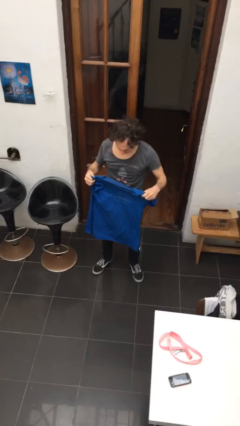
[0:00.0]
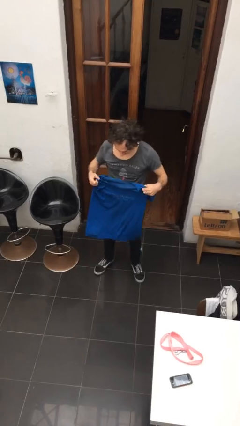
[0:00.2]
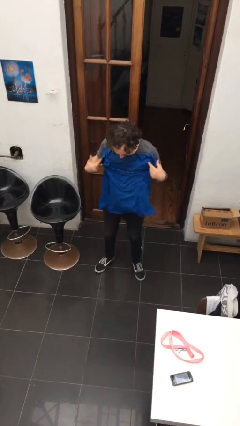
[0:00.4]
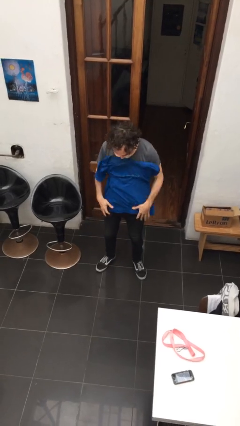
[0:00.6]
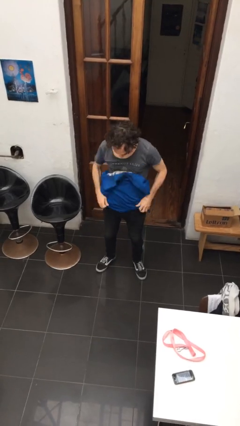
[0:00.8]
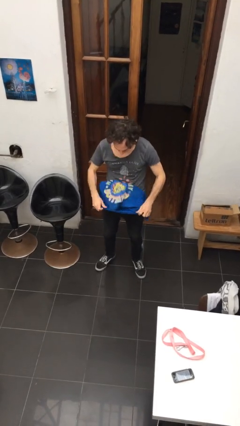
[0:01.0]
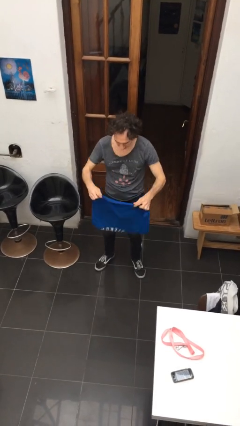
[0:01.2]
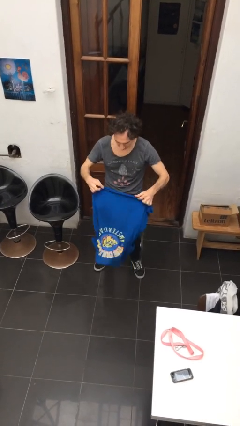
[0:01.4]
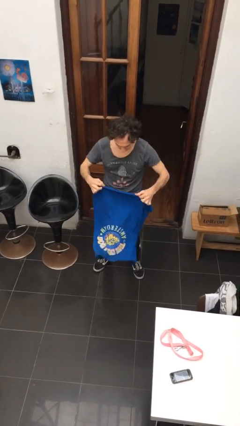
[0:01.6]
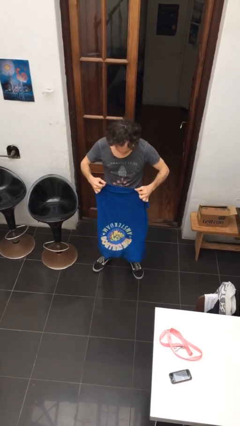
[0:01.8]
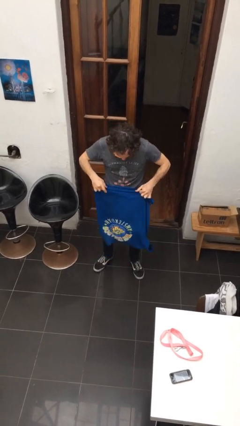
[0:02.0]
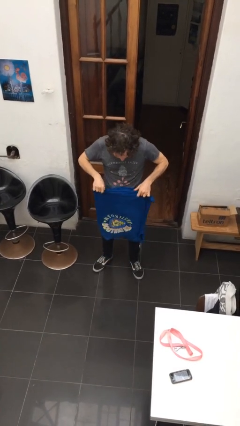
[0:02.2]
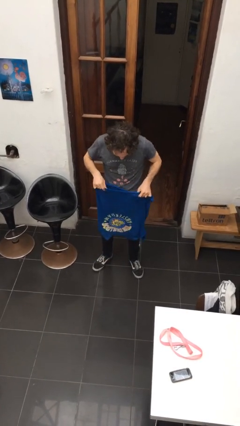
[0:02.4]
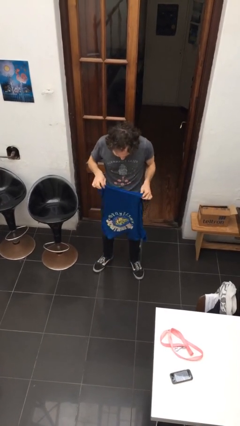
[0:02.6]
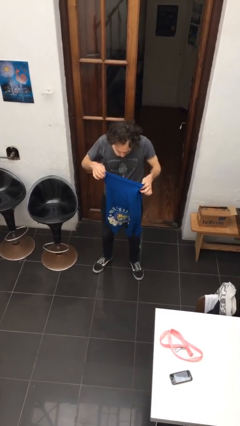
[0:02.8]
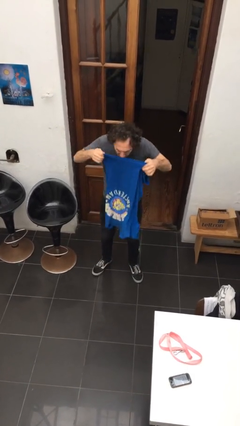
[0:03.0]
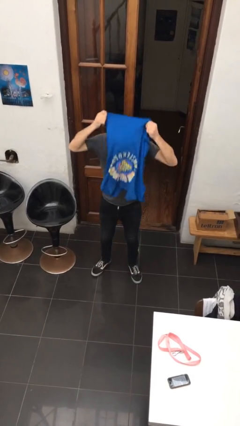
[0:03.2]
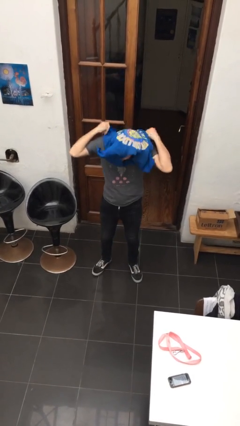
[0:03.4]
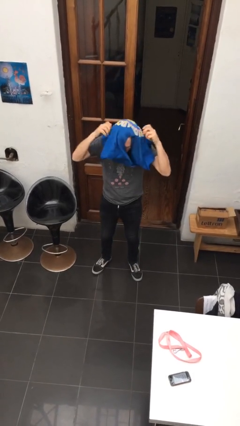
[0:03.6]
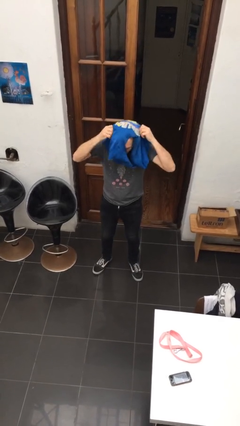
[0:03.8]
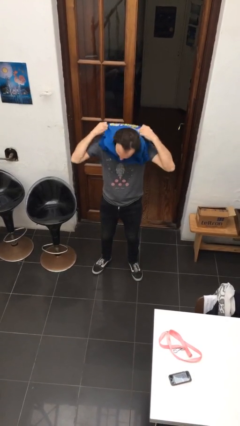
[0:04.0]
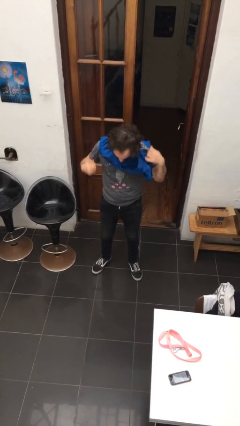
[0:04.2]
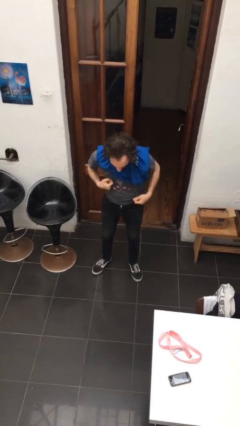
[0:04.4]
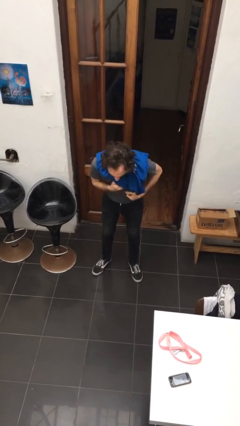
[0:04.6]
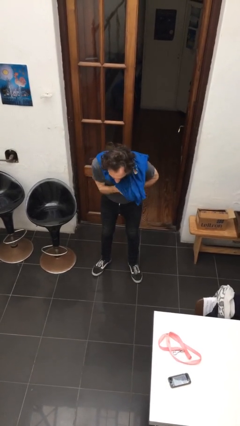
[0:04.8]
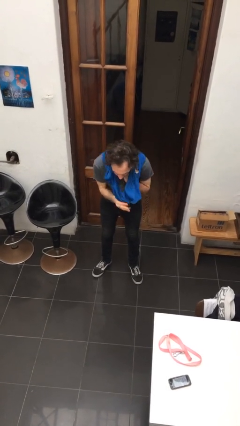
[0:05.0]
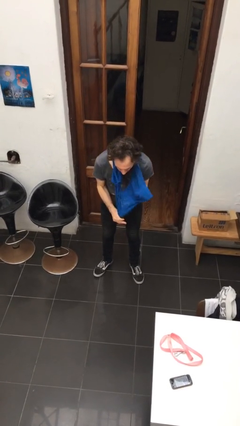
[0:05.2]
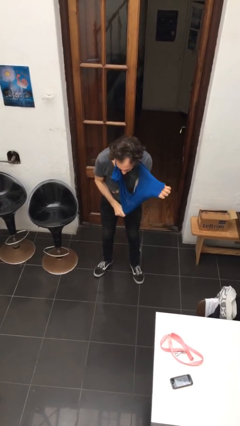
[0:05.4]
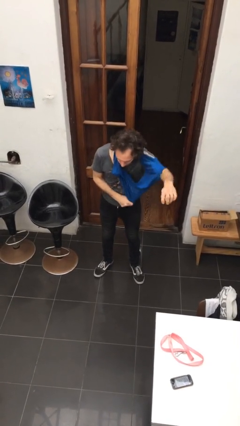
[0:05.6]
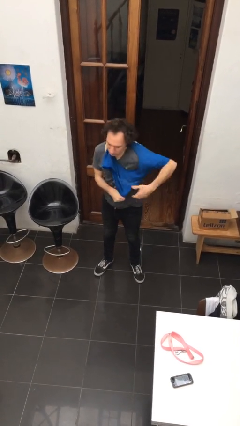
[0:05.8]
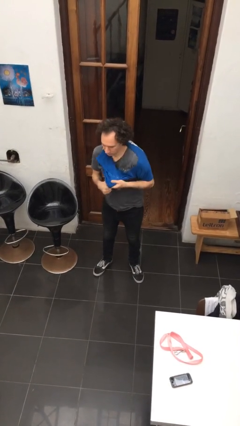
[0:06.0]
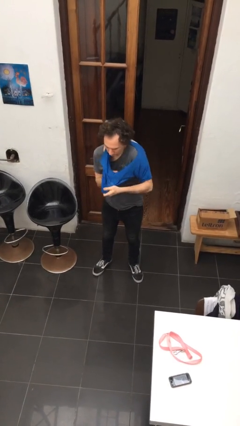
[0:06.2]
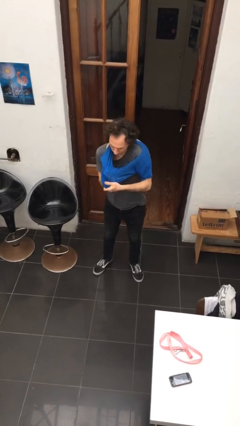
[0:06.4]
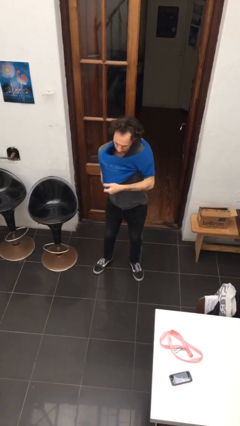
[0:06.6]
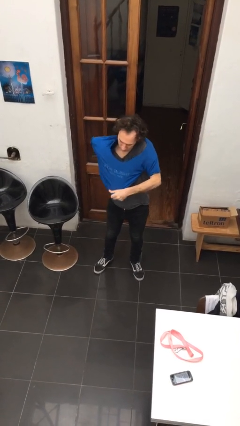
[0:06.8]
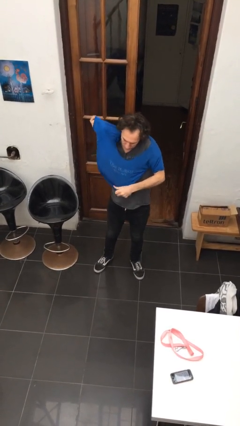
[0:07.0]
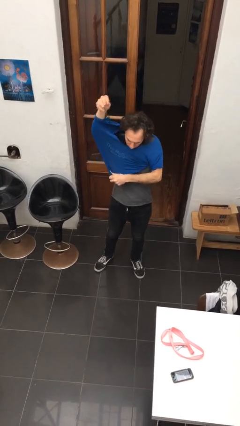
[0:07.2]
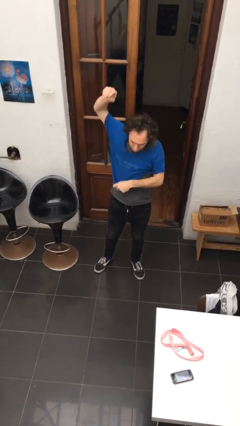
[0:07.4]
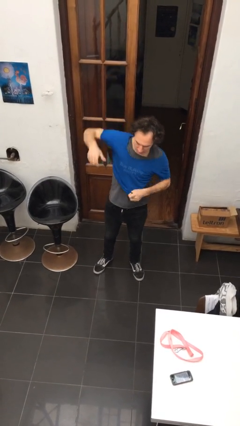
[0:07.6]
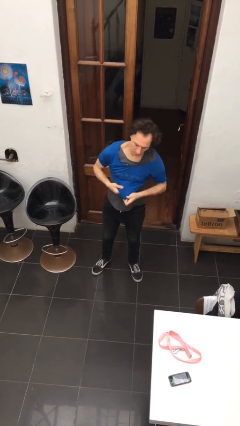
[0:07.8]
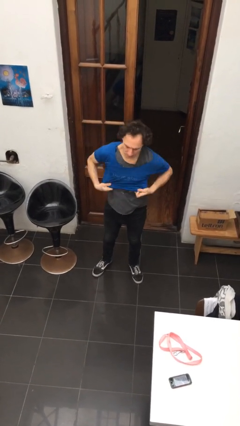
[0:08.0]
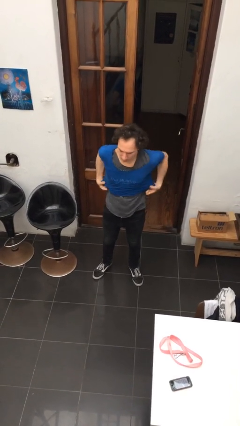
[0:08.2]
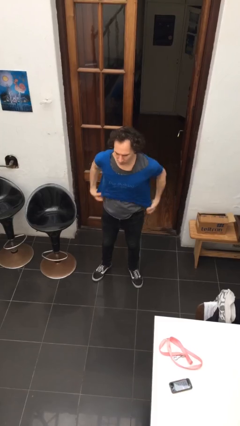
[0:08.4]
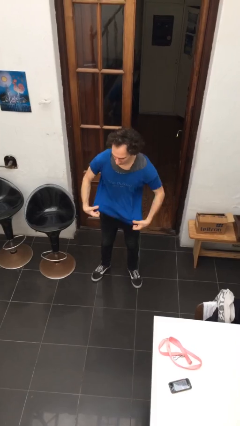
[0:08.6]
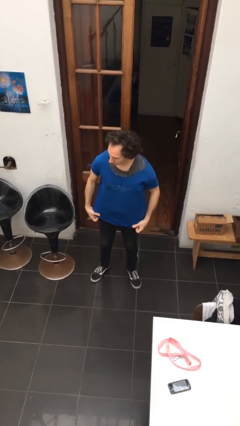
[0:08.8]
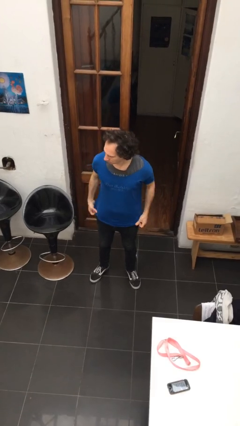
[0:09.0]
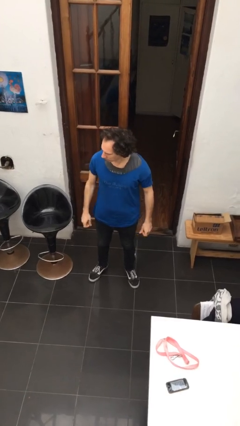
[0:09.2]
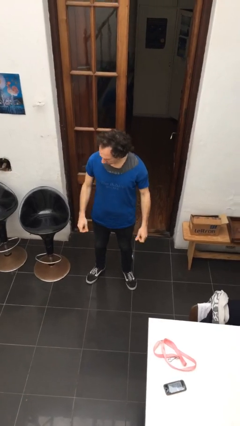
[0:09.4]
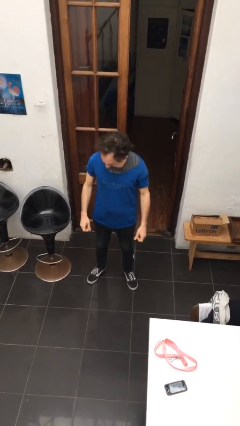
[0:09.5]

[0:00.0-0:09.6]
person puts on shirt

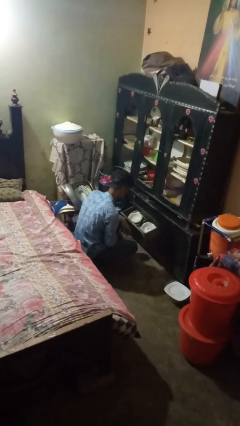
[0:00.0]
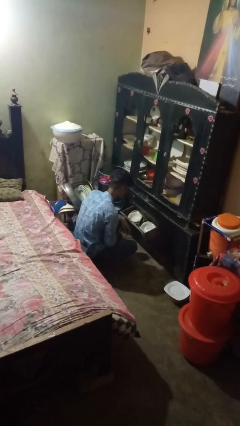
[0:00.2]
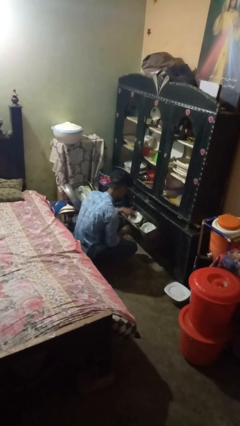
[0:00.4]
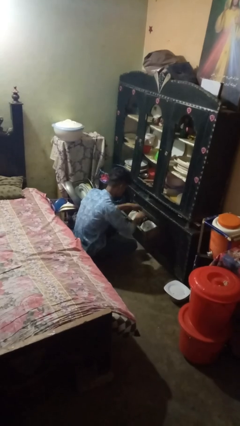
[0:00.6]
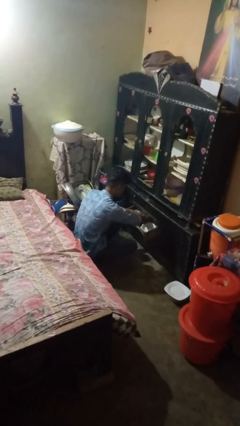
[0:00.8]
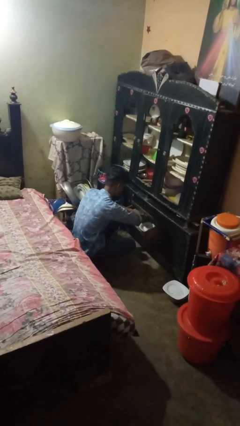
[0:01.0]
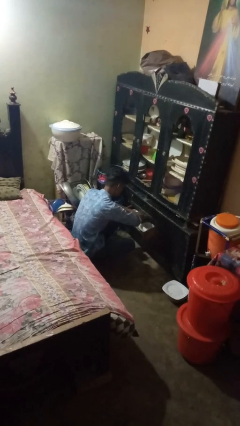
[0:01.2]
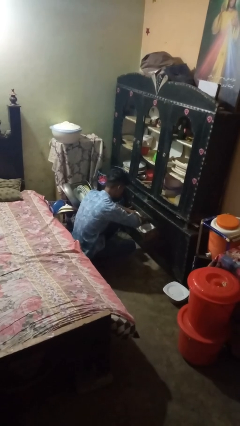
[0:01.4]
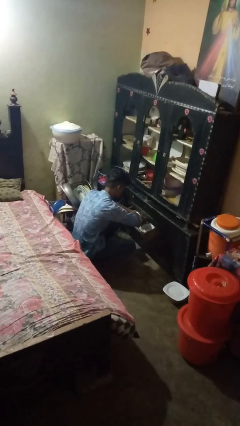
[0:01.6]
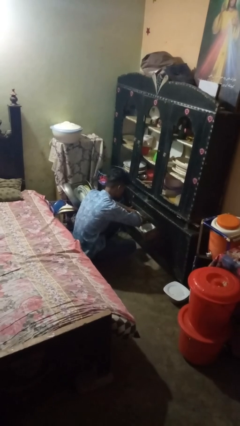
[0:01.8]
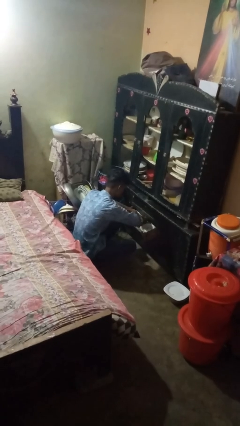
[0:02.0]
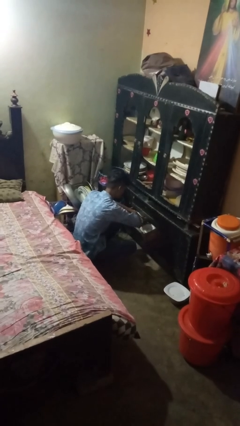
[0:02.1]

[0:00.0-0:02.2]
person searches in kitchen drawer

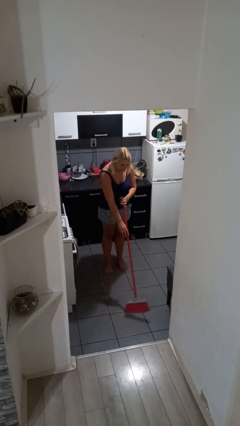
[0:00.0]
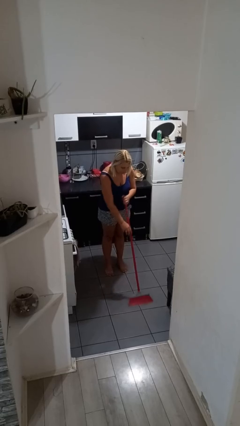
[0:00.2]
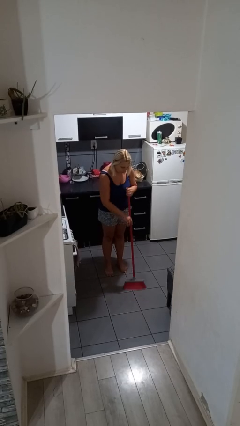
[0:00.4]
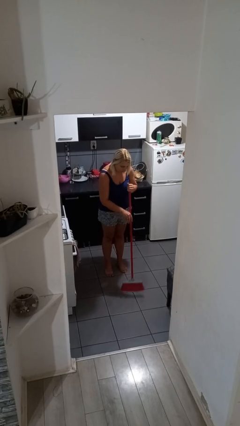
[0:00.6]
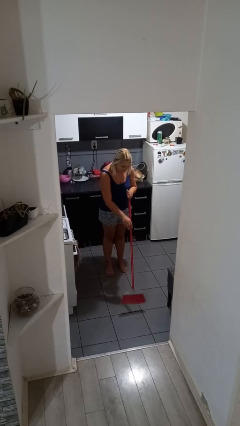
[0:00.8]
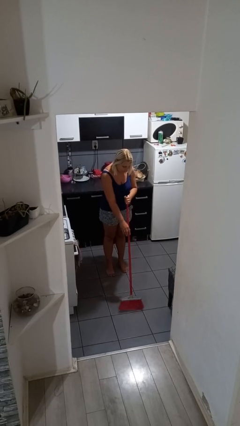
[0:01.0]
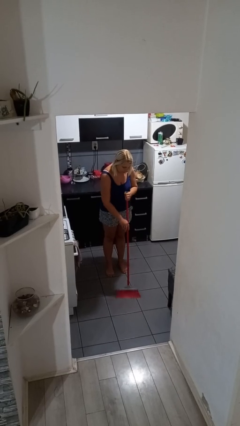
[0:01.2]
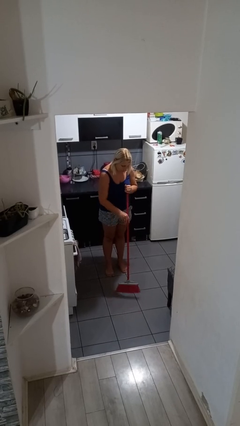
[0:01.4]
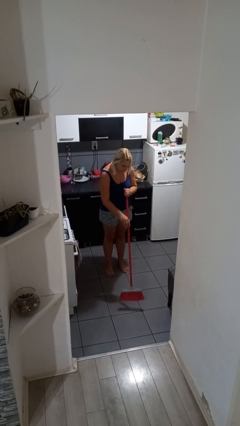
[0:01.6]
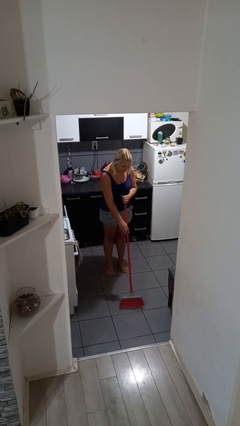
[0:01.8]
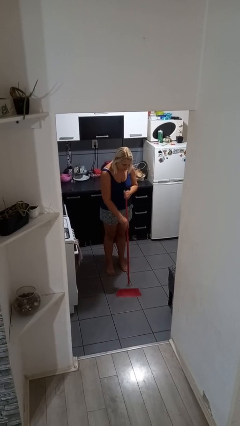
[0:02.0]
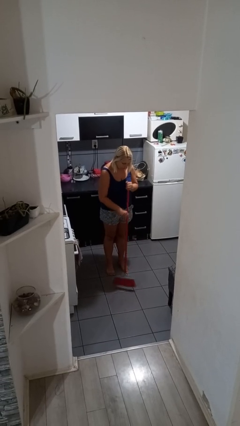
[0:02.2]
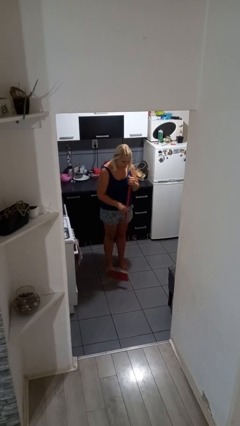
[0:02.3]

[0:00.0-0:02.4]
person sweeps floor

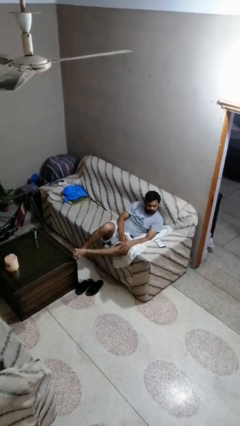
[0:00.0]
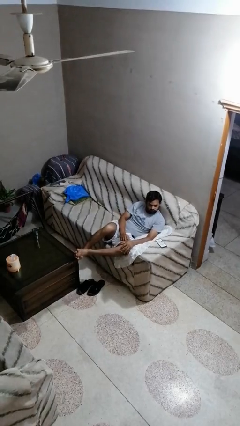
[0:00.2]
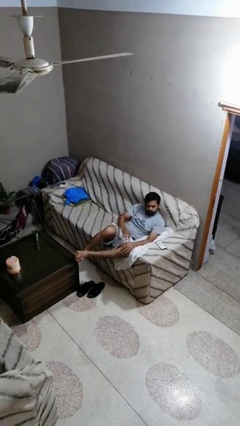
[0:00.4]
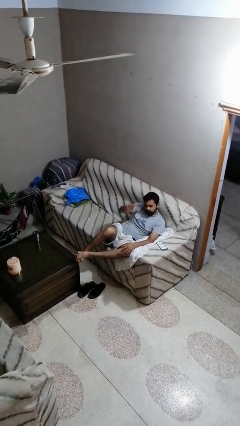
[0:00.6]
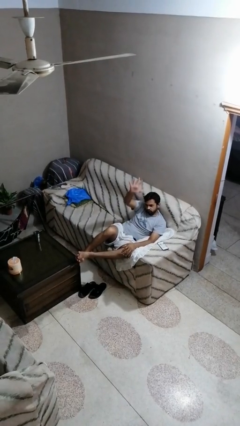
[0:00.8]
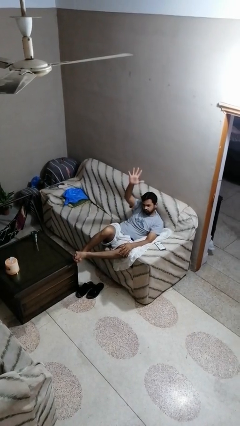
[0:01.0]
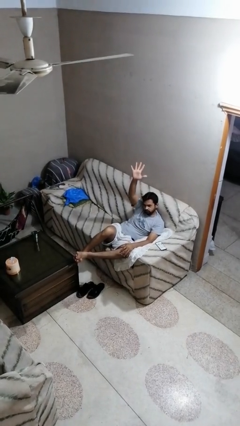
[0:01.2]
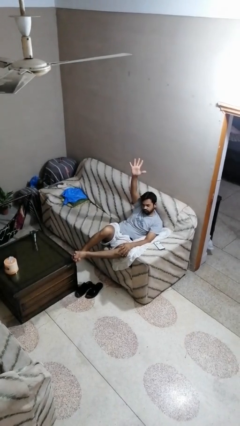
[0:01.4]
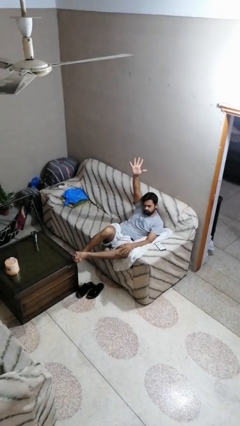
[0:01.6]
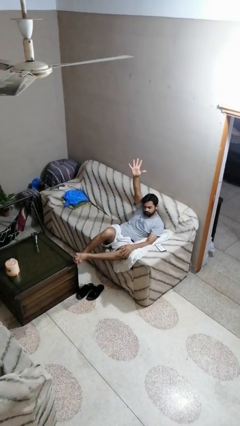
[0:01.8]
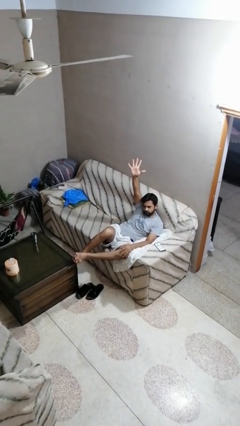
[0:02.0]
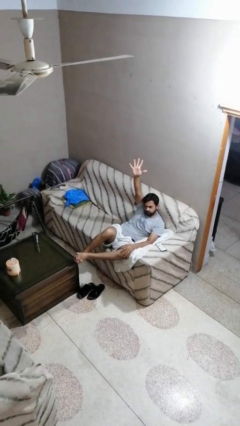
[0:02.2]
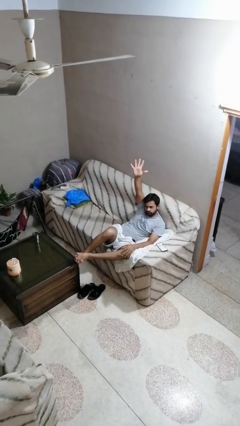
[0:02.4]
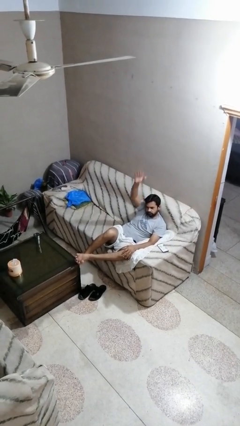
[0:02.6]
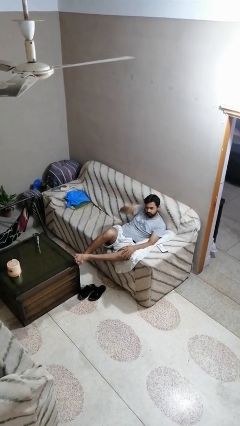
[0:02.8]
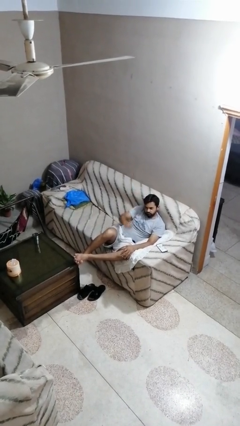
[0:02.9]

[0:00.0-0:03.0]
person gestures number five

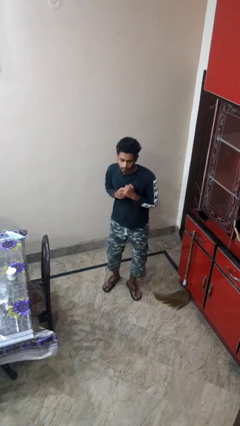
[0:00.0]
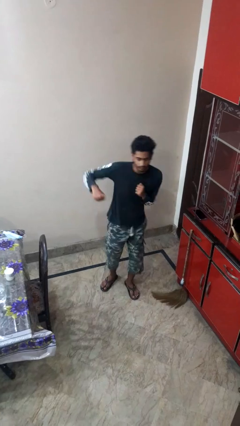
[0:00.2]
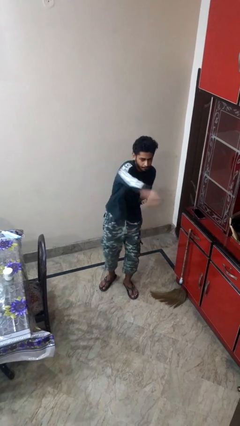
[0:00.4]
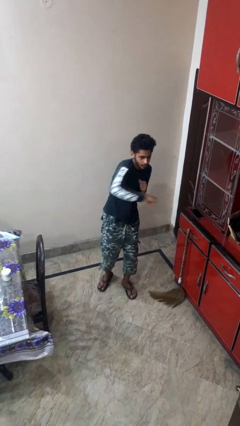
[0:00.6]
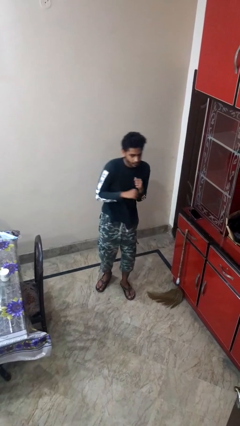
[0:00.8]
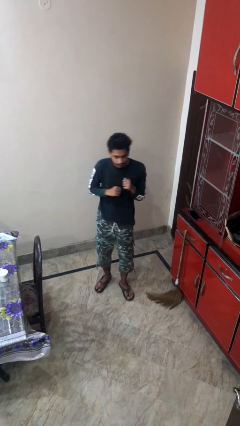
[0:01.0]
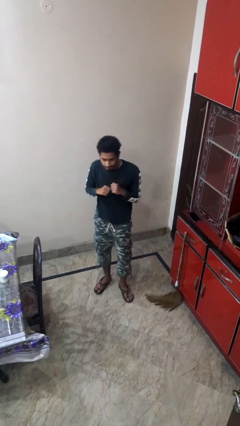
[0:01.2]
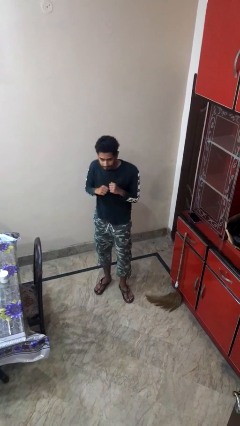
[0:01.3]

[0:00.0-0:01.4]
person punches
